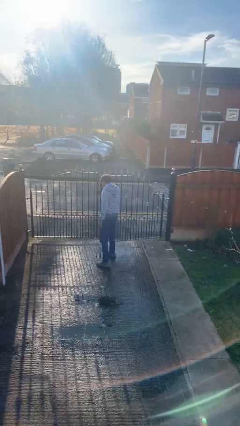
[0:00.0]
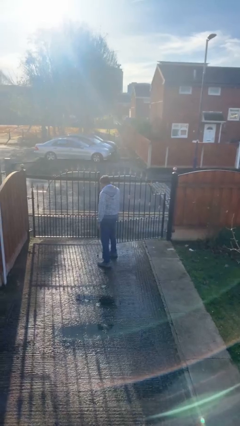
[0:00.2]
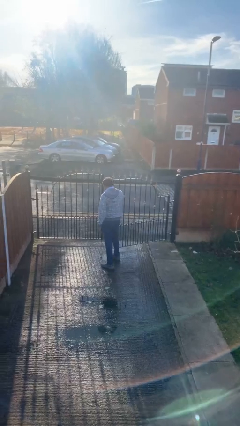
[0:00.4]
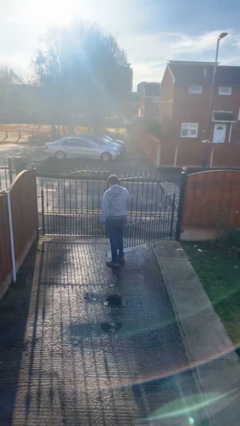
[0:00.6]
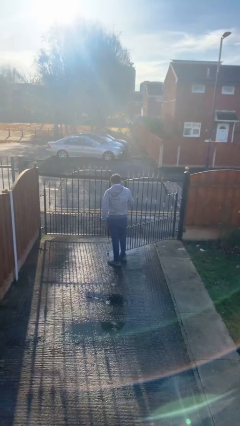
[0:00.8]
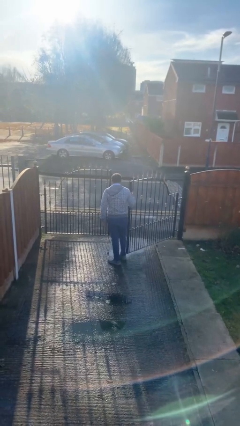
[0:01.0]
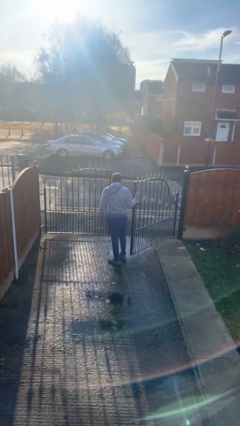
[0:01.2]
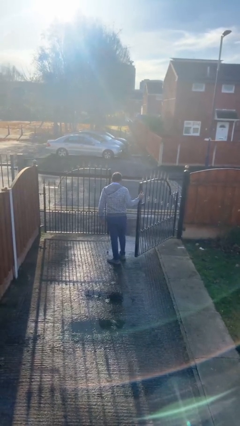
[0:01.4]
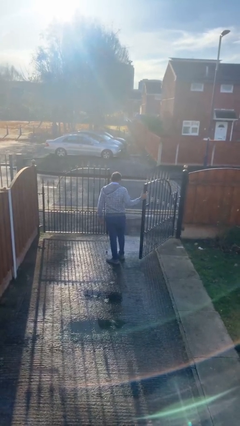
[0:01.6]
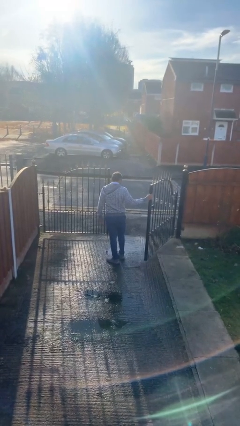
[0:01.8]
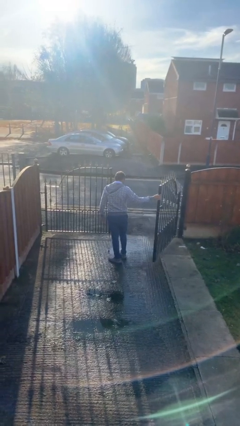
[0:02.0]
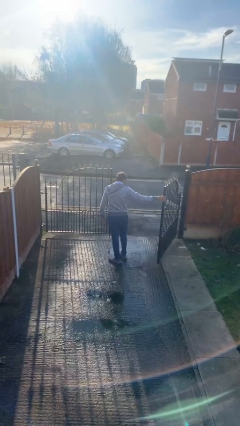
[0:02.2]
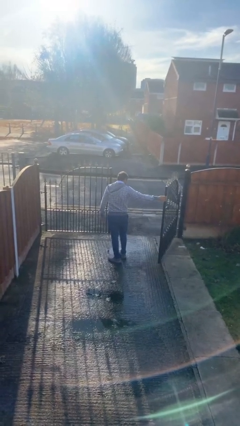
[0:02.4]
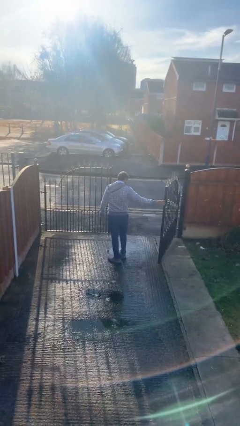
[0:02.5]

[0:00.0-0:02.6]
person opens facility door

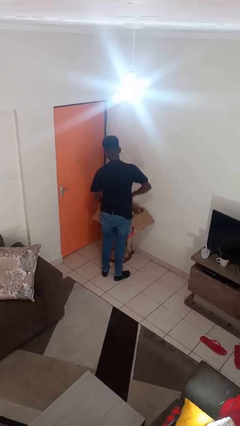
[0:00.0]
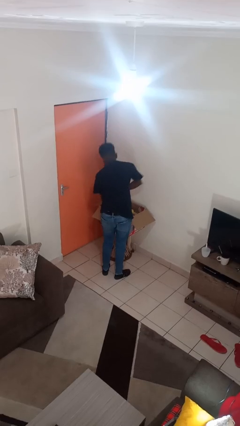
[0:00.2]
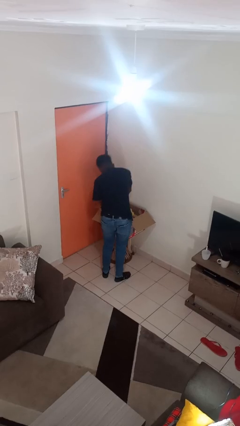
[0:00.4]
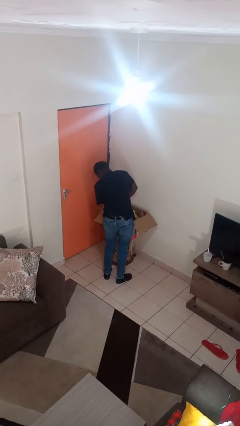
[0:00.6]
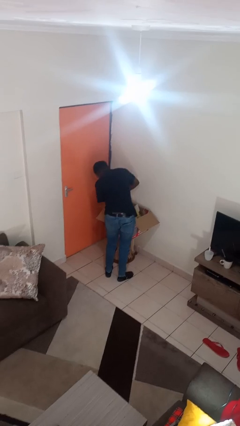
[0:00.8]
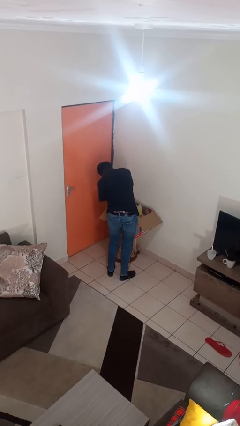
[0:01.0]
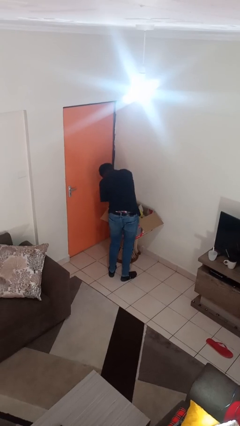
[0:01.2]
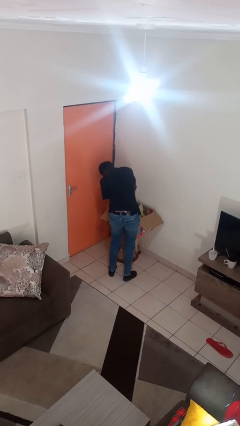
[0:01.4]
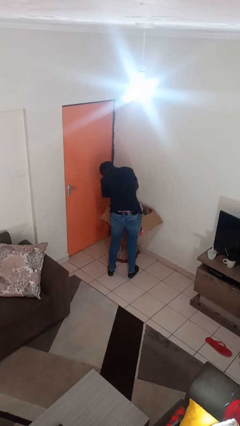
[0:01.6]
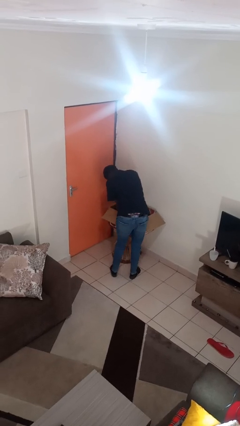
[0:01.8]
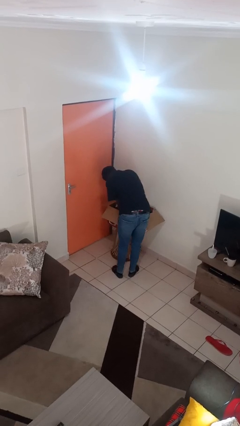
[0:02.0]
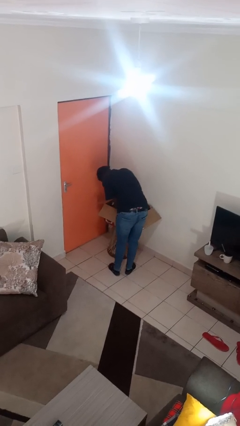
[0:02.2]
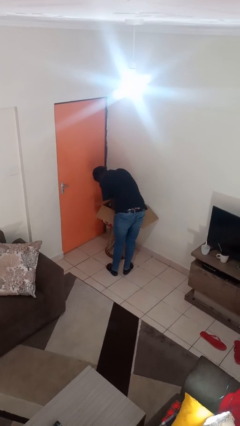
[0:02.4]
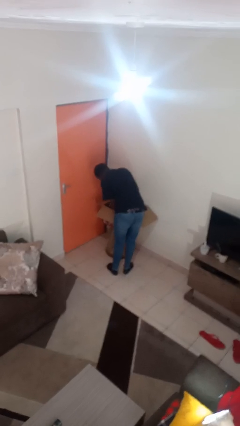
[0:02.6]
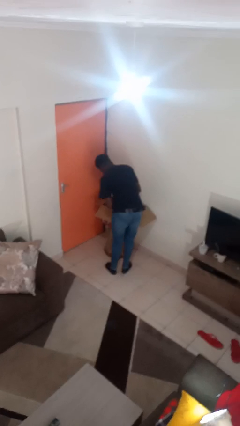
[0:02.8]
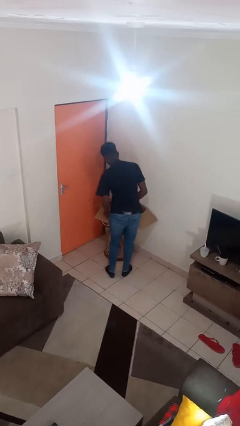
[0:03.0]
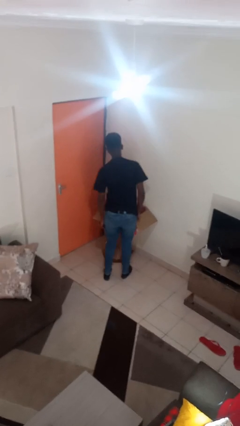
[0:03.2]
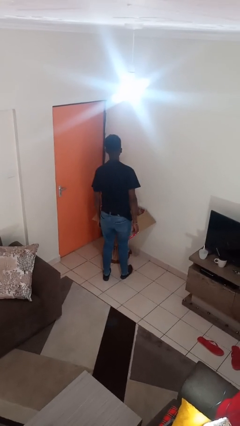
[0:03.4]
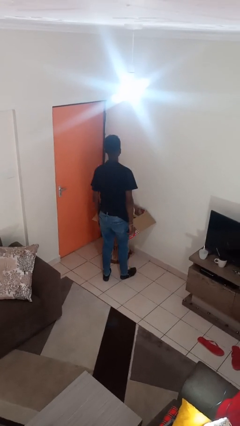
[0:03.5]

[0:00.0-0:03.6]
person searches in box

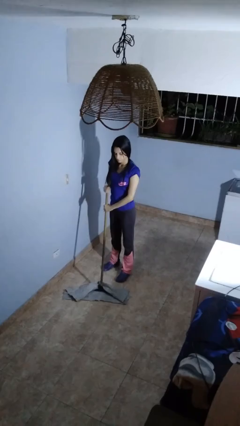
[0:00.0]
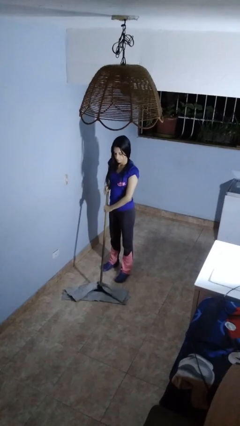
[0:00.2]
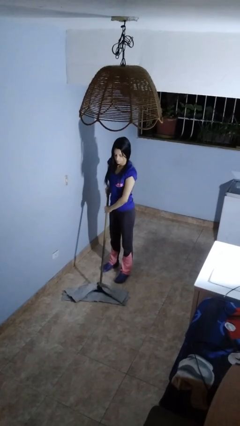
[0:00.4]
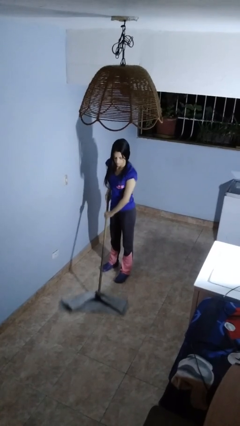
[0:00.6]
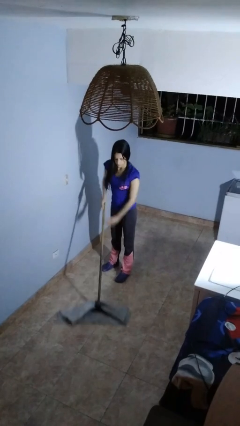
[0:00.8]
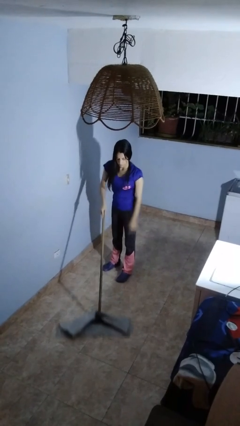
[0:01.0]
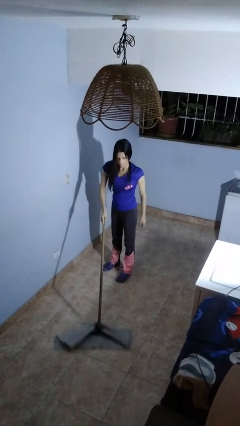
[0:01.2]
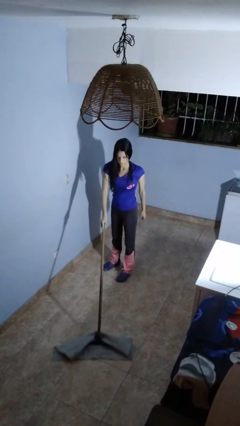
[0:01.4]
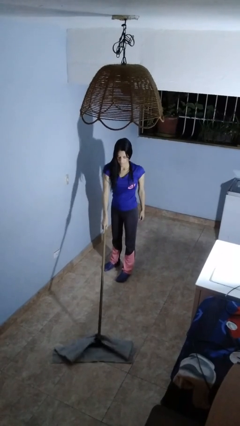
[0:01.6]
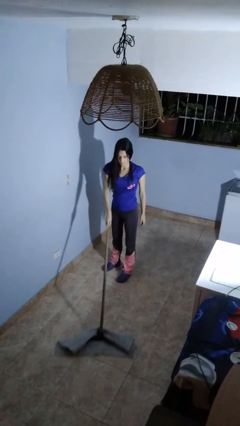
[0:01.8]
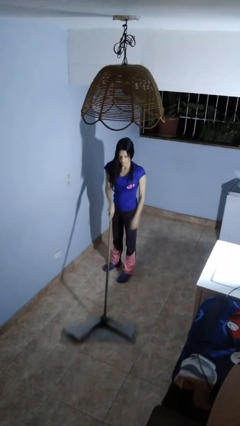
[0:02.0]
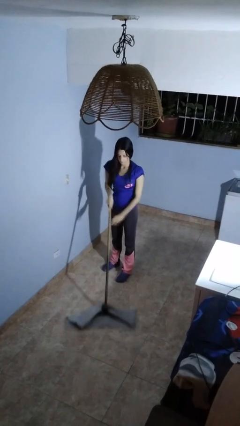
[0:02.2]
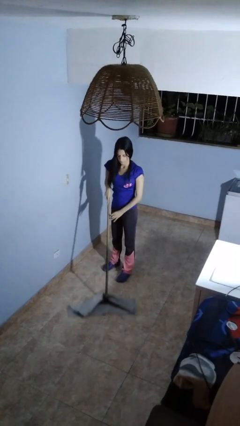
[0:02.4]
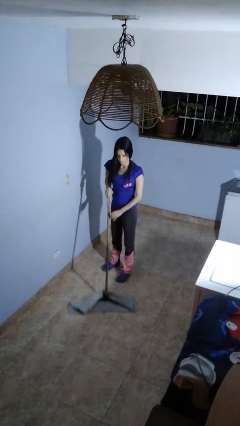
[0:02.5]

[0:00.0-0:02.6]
person mops

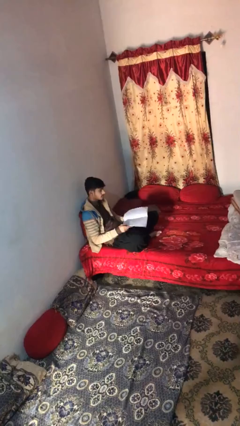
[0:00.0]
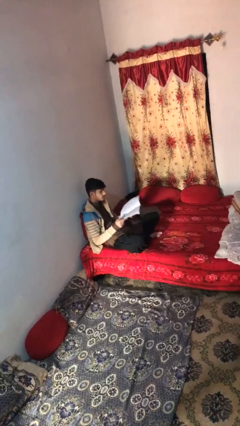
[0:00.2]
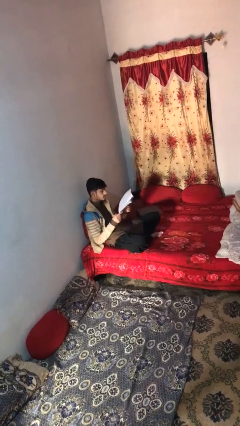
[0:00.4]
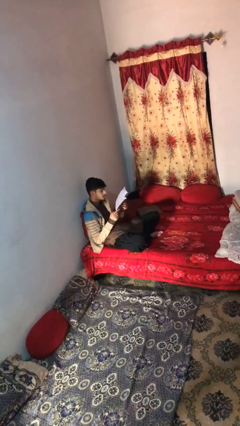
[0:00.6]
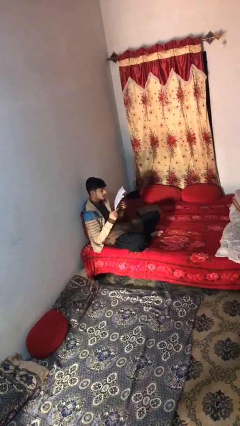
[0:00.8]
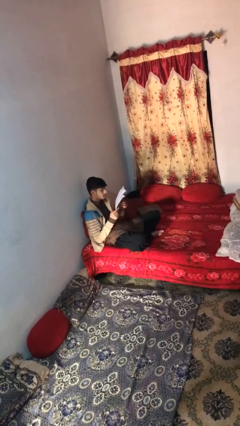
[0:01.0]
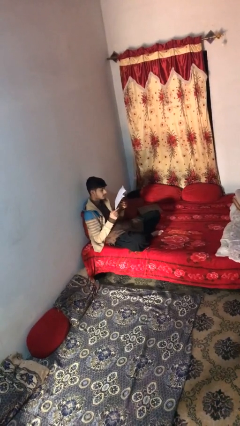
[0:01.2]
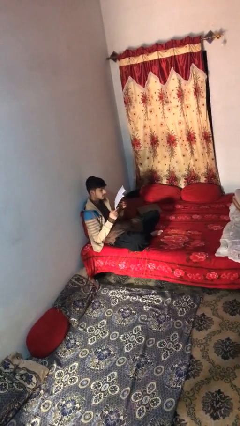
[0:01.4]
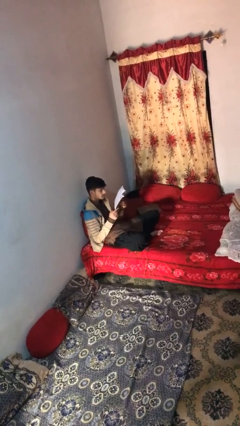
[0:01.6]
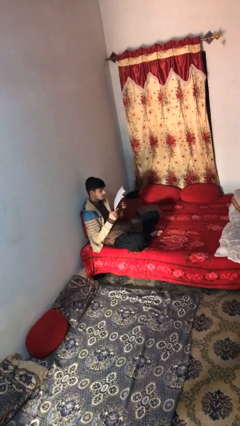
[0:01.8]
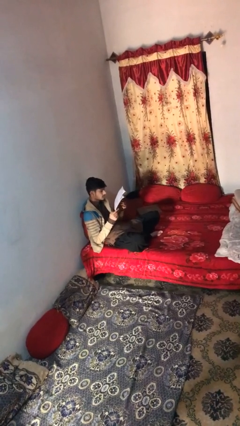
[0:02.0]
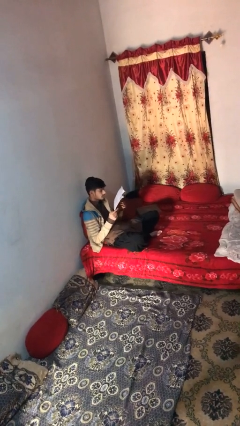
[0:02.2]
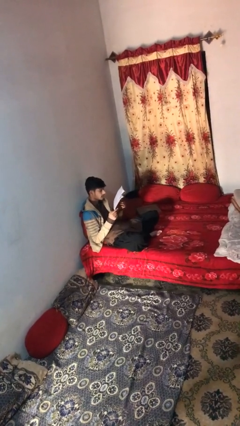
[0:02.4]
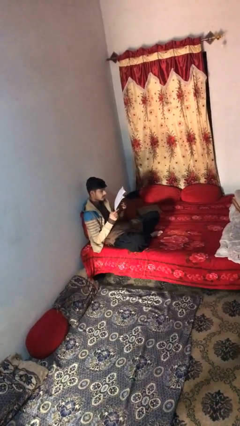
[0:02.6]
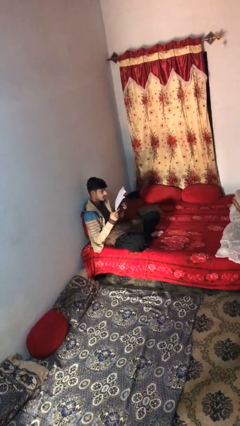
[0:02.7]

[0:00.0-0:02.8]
person reads document

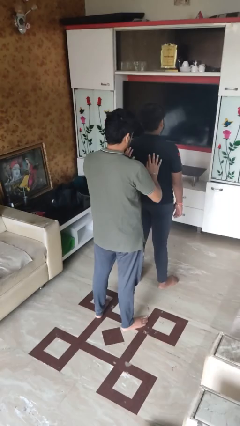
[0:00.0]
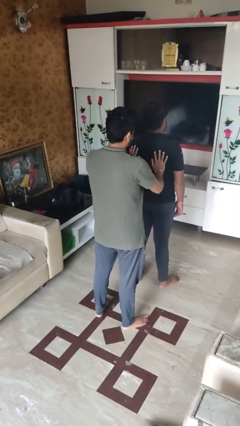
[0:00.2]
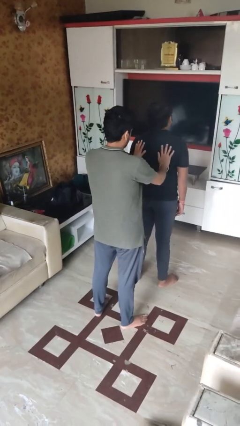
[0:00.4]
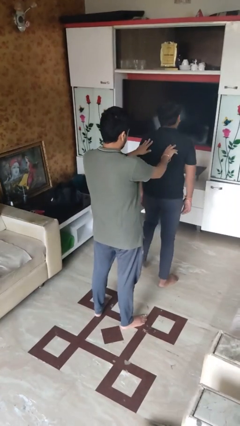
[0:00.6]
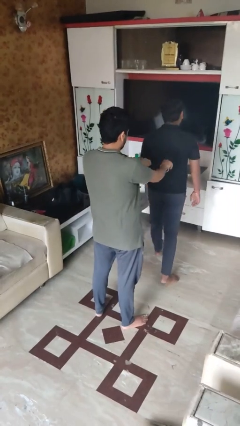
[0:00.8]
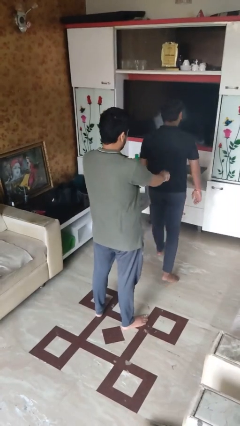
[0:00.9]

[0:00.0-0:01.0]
person shoves person

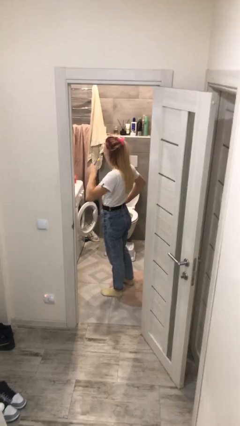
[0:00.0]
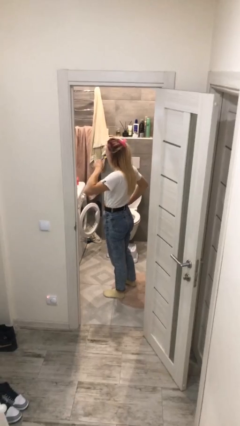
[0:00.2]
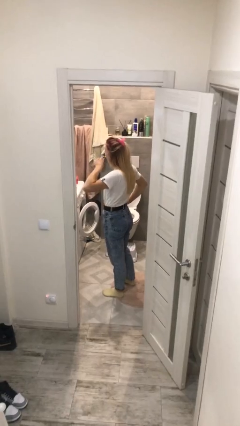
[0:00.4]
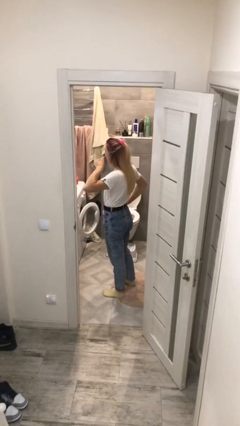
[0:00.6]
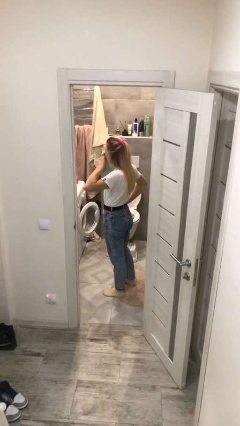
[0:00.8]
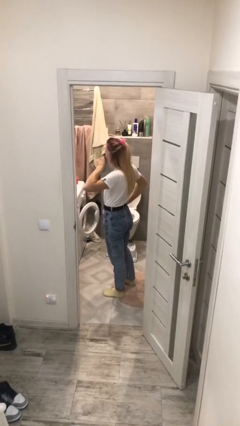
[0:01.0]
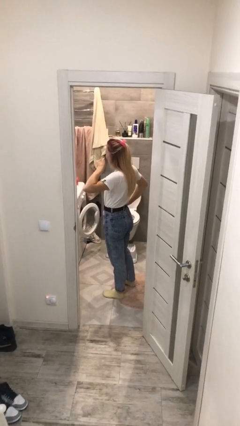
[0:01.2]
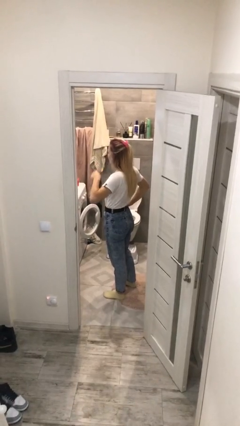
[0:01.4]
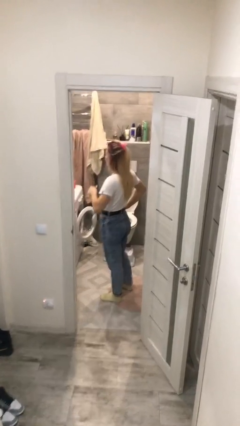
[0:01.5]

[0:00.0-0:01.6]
person brushes teeth

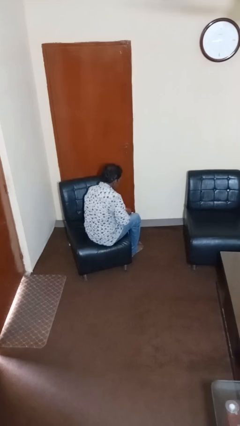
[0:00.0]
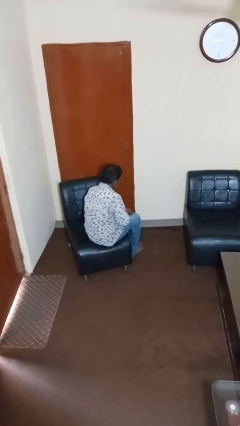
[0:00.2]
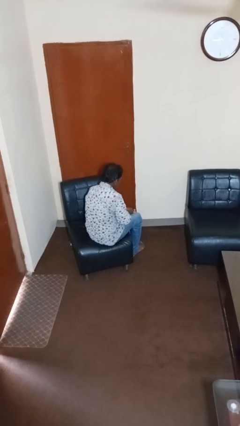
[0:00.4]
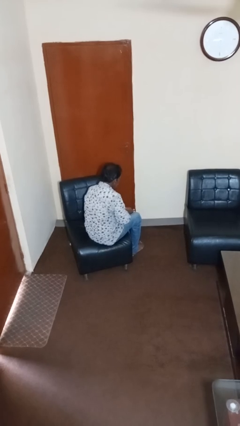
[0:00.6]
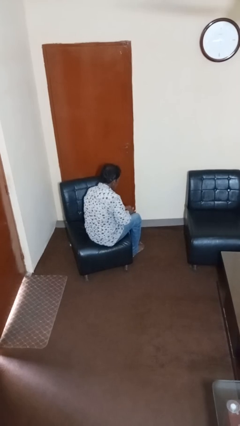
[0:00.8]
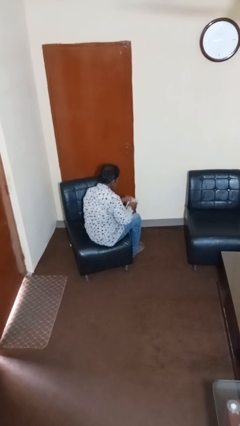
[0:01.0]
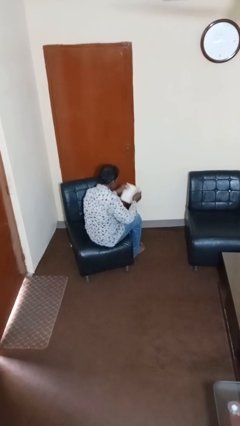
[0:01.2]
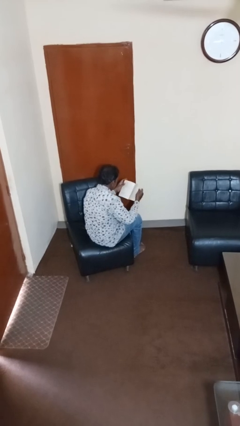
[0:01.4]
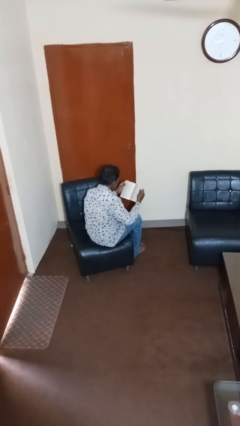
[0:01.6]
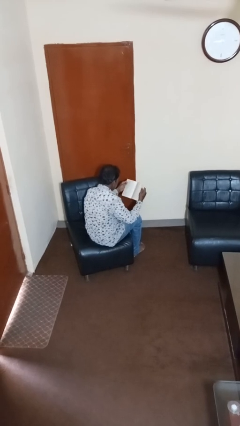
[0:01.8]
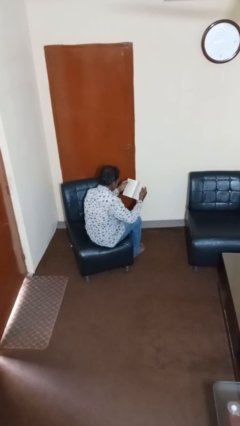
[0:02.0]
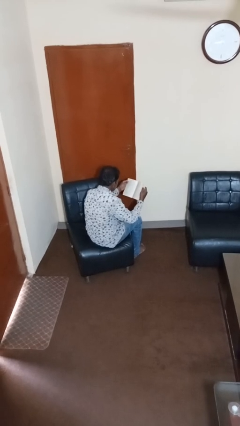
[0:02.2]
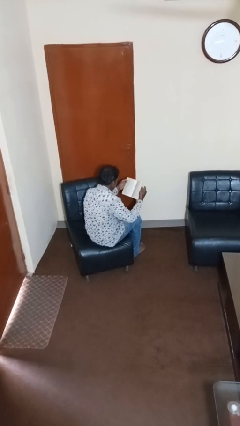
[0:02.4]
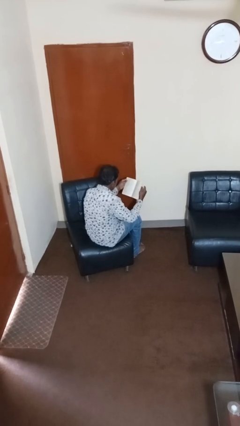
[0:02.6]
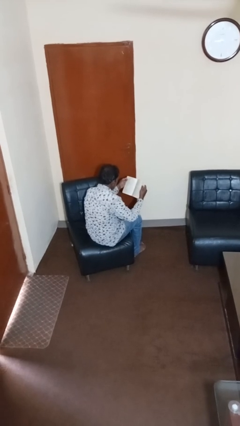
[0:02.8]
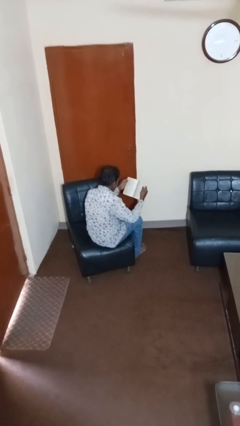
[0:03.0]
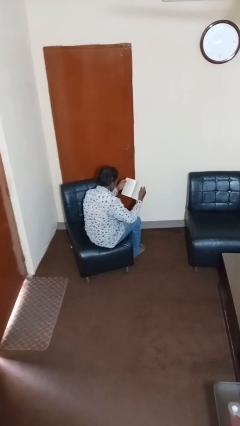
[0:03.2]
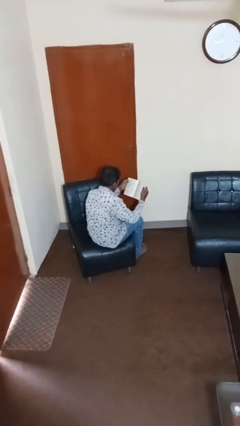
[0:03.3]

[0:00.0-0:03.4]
person reads book
